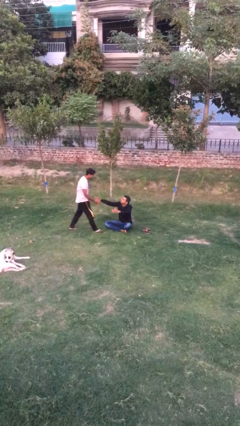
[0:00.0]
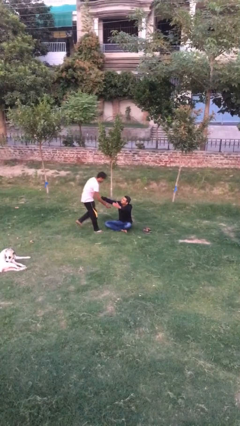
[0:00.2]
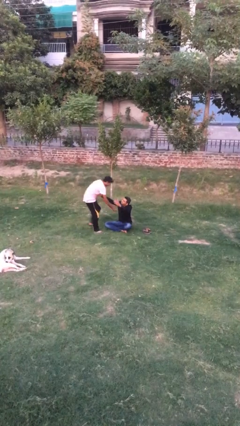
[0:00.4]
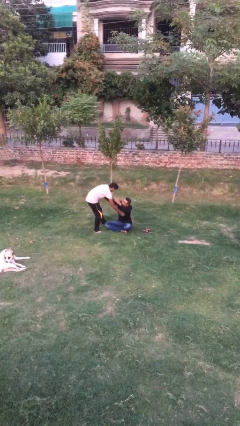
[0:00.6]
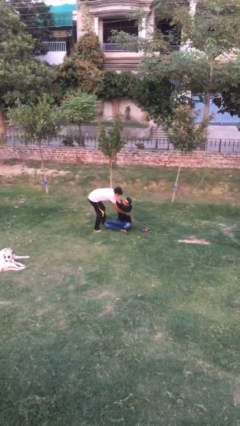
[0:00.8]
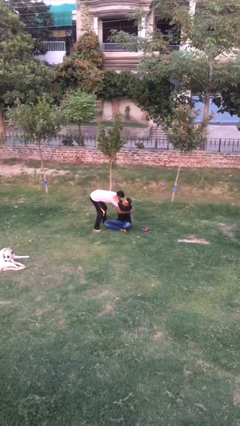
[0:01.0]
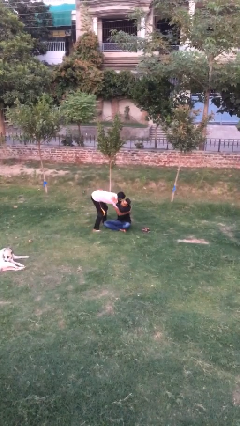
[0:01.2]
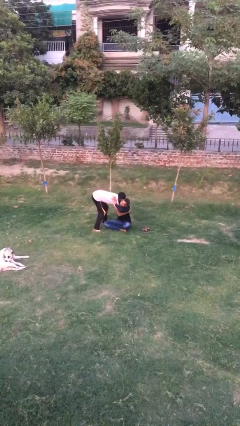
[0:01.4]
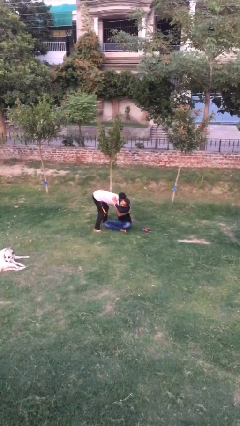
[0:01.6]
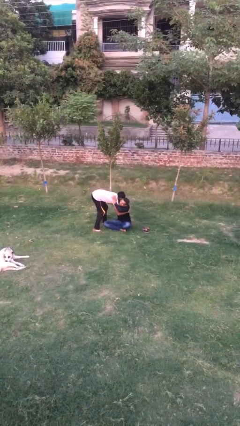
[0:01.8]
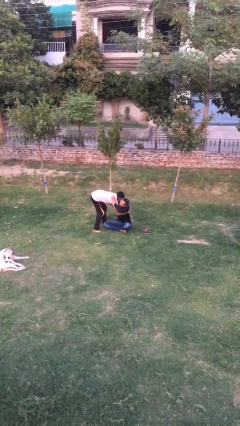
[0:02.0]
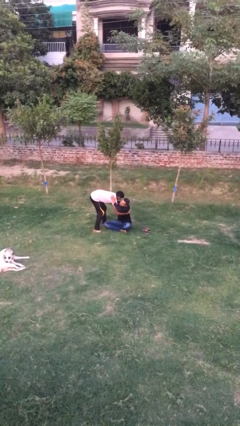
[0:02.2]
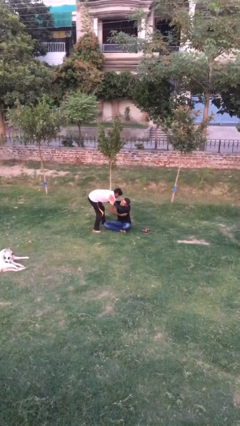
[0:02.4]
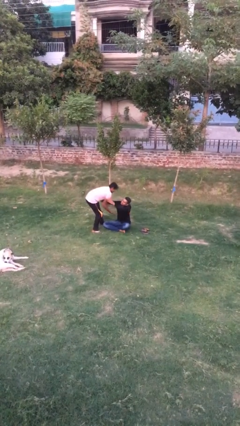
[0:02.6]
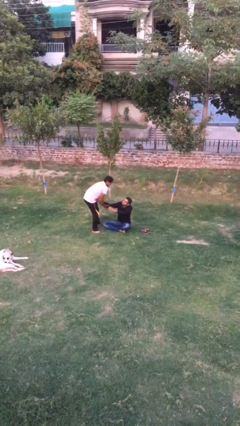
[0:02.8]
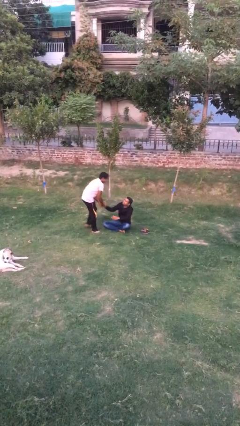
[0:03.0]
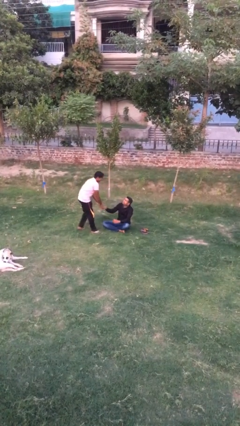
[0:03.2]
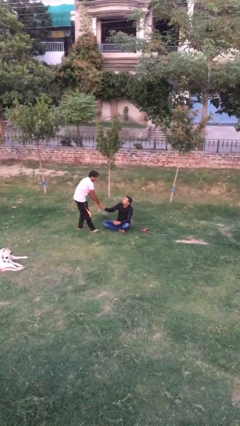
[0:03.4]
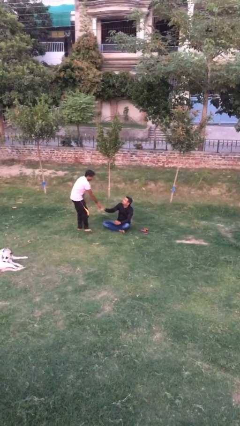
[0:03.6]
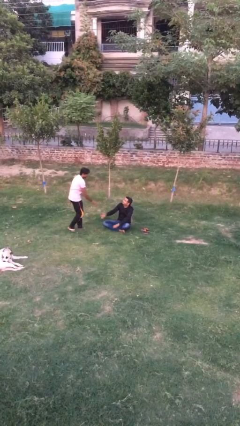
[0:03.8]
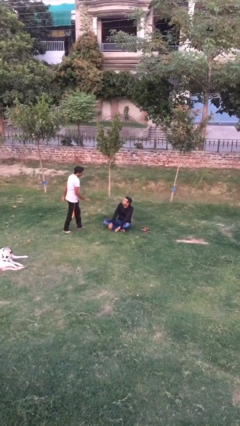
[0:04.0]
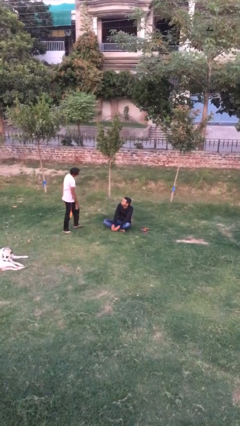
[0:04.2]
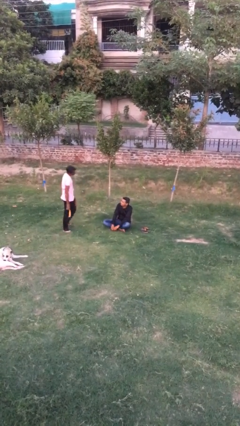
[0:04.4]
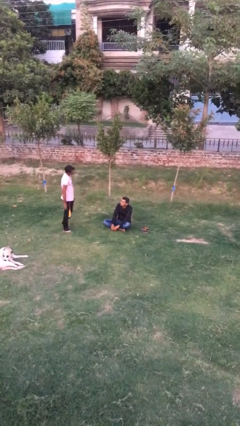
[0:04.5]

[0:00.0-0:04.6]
person embraces person

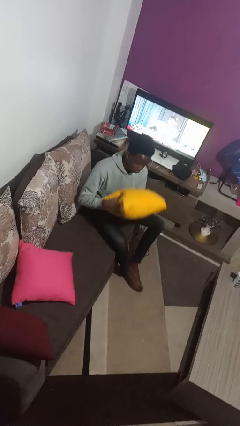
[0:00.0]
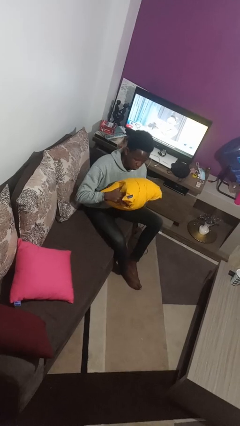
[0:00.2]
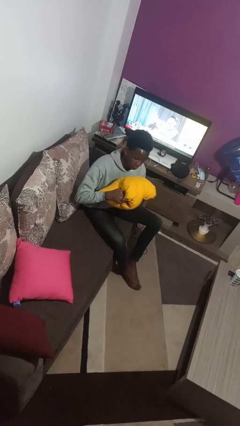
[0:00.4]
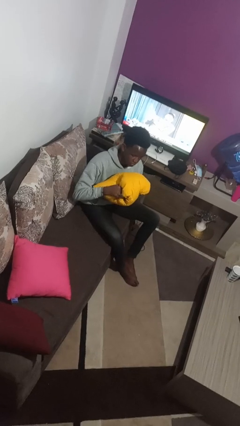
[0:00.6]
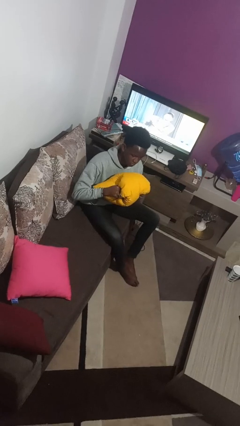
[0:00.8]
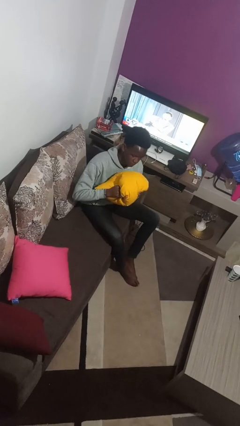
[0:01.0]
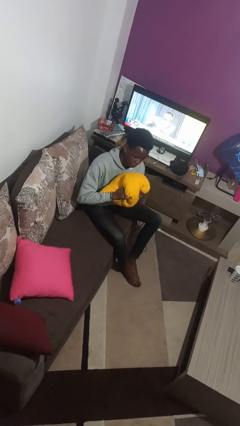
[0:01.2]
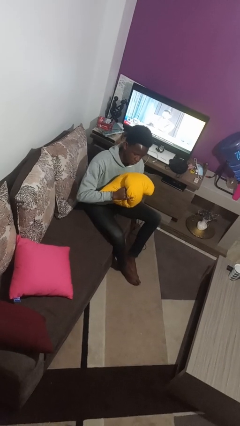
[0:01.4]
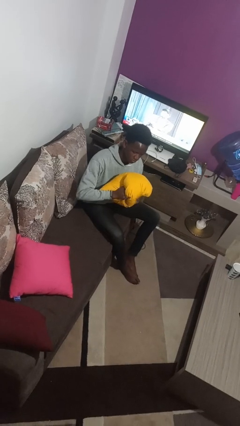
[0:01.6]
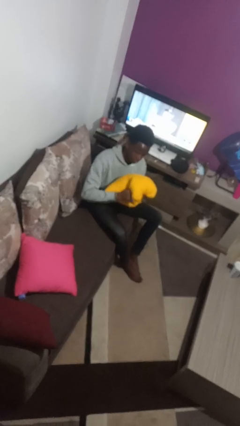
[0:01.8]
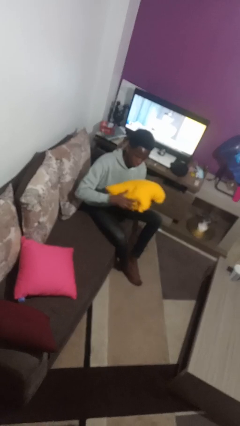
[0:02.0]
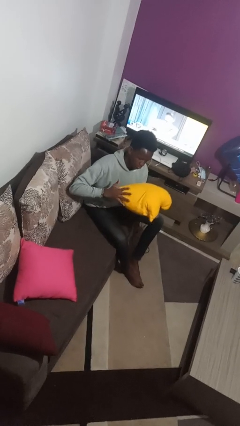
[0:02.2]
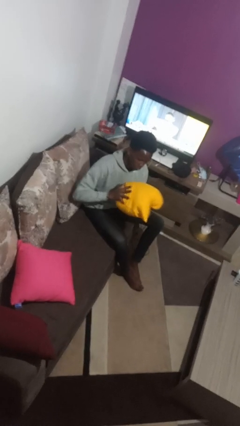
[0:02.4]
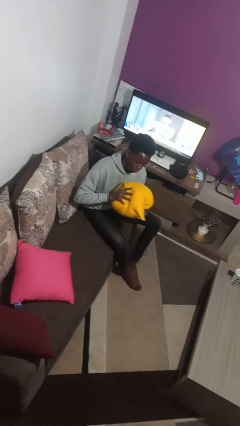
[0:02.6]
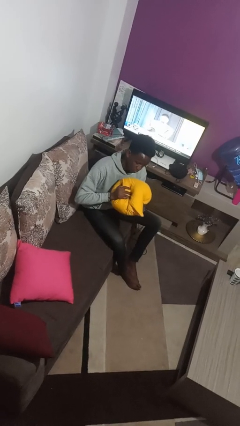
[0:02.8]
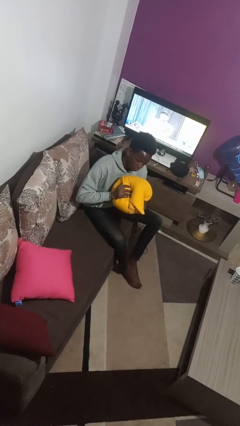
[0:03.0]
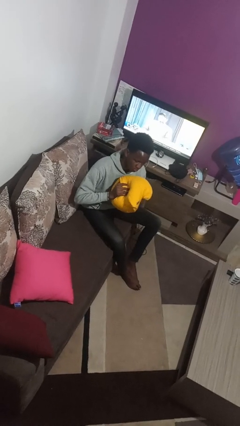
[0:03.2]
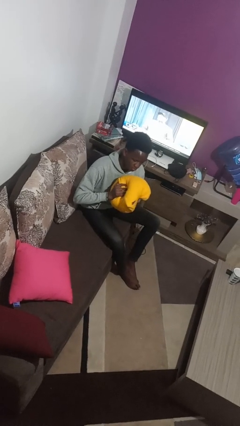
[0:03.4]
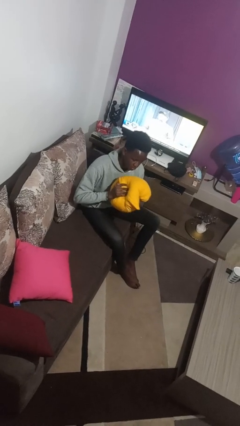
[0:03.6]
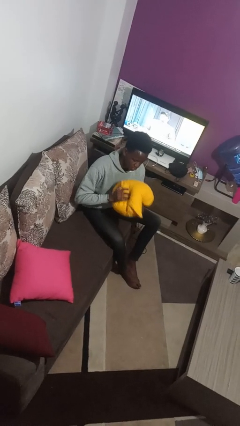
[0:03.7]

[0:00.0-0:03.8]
person squeezes object

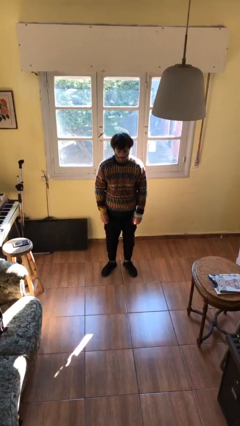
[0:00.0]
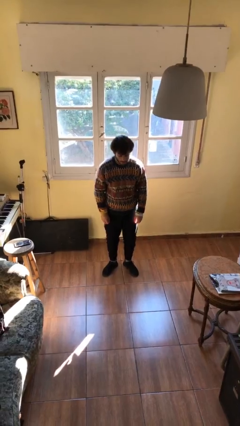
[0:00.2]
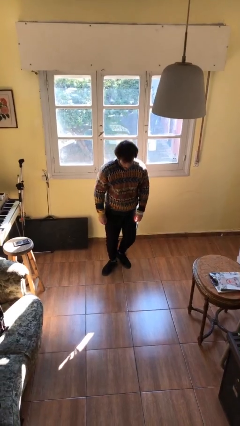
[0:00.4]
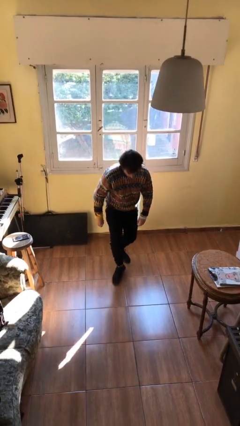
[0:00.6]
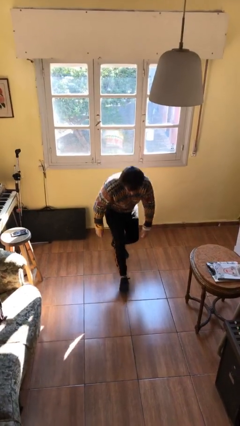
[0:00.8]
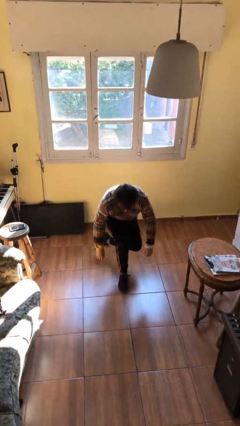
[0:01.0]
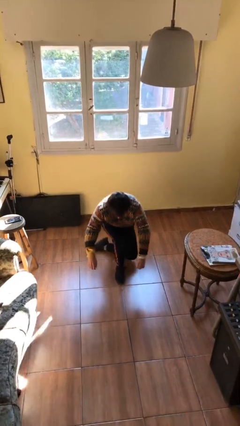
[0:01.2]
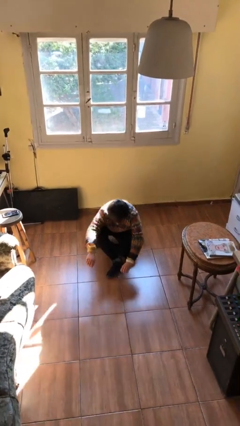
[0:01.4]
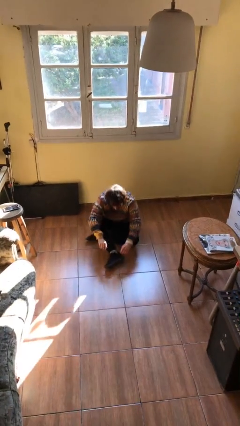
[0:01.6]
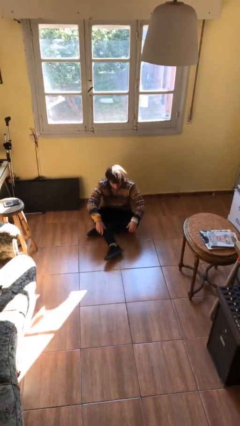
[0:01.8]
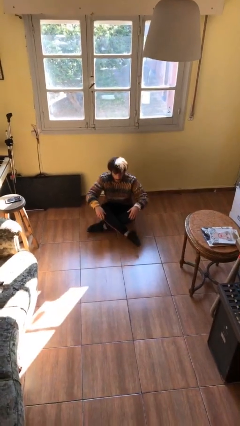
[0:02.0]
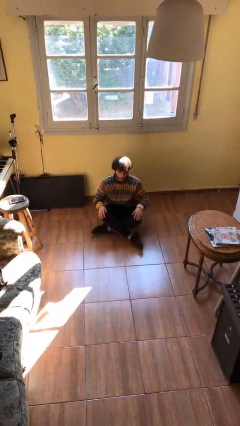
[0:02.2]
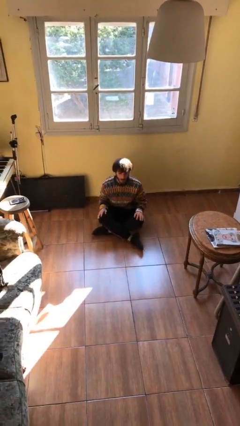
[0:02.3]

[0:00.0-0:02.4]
person sits crisscross

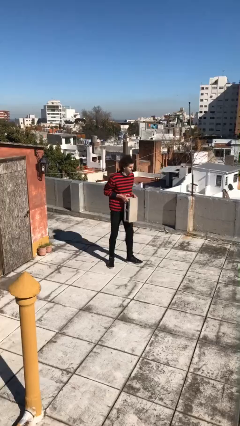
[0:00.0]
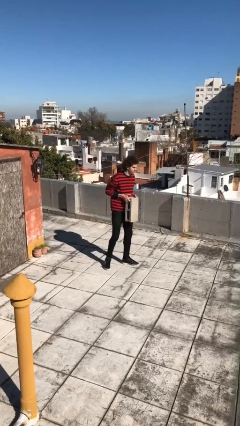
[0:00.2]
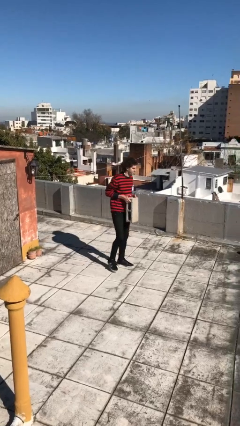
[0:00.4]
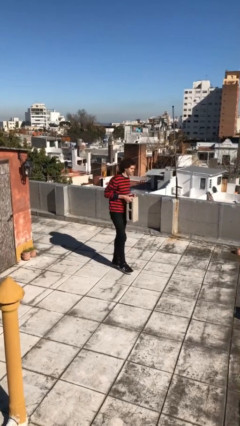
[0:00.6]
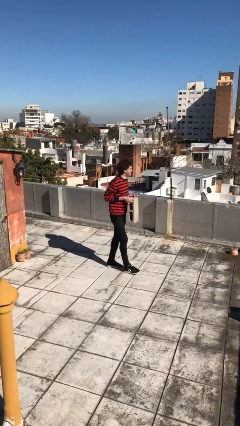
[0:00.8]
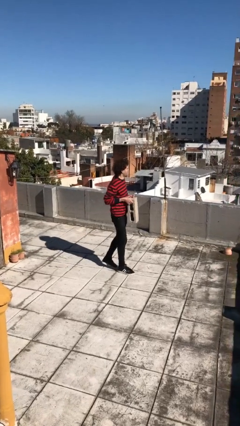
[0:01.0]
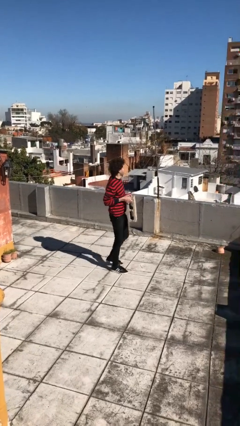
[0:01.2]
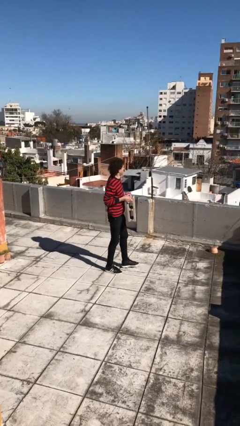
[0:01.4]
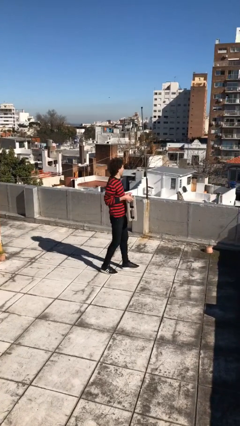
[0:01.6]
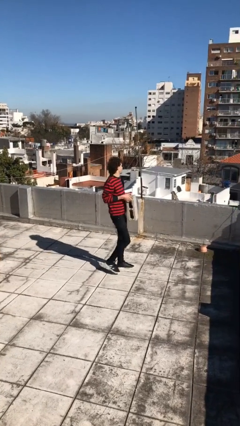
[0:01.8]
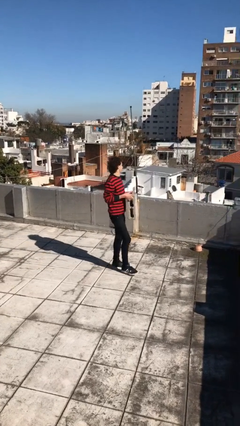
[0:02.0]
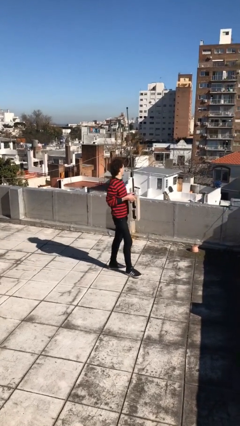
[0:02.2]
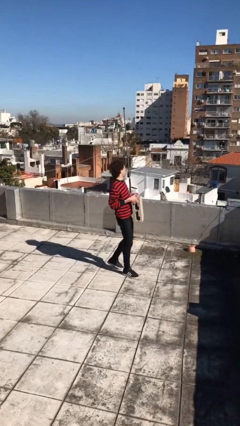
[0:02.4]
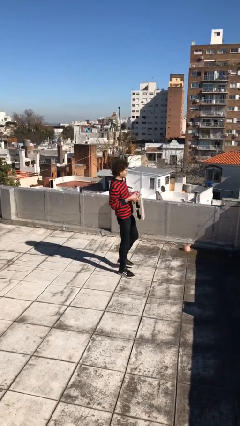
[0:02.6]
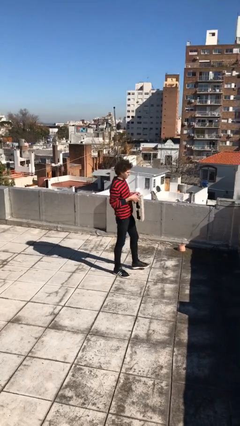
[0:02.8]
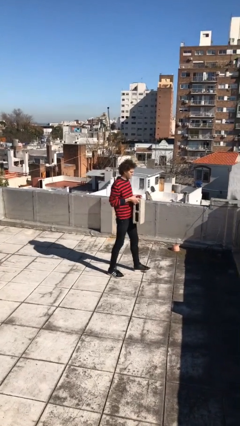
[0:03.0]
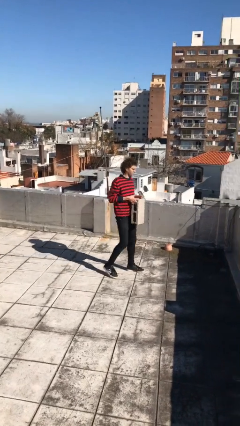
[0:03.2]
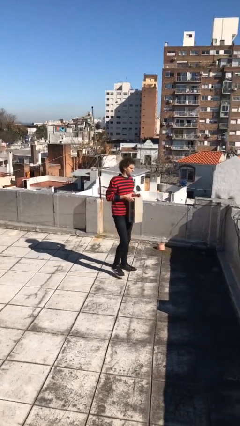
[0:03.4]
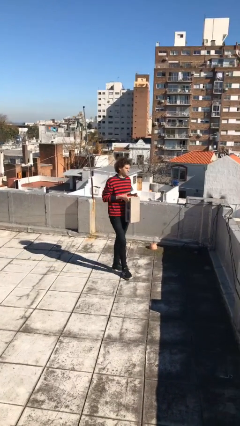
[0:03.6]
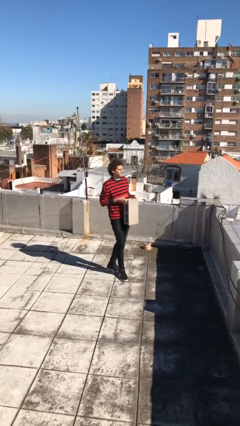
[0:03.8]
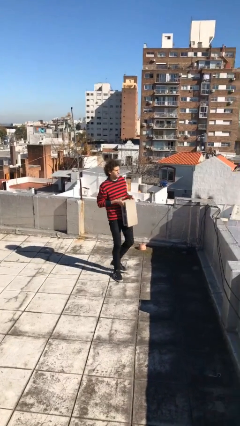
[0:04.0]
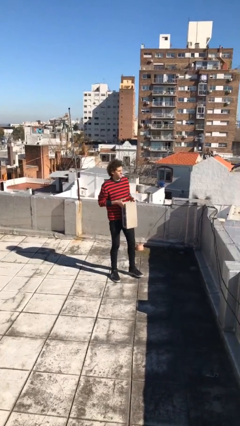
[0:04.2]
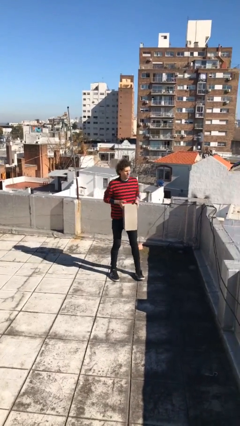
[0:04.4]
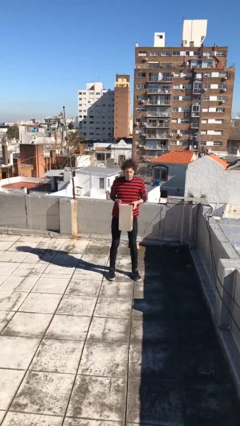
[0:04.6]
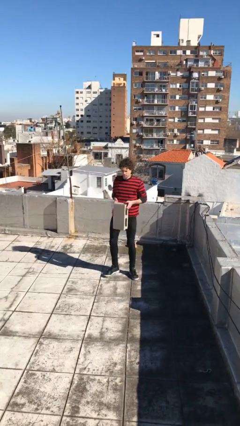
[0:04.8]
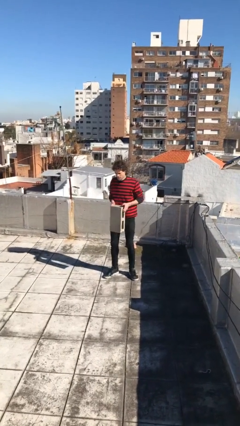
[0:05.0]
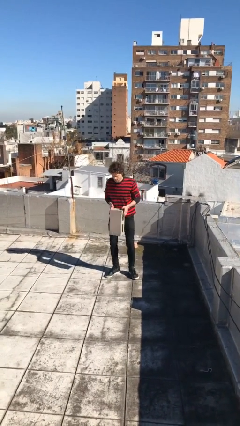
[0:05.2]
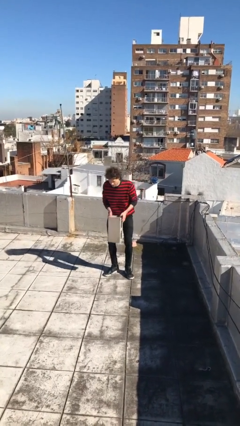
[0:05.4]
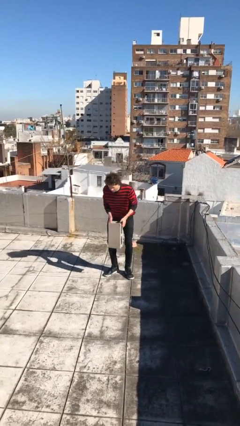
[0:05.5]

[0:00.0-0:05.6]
person carries heavy object

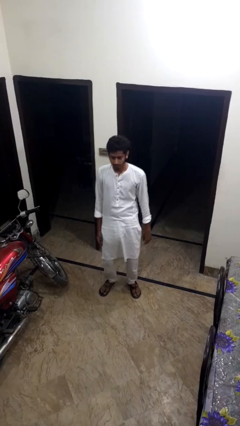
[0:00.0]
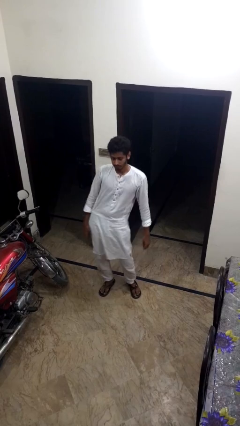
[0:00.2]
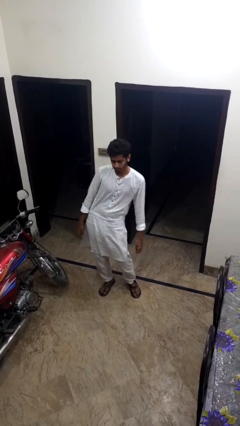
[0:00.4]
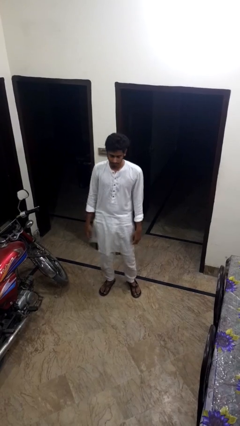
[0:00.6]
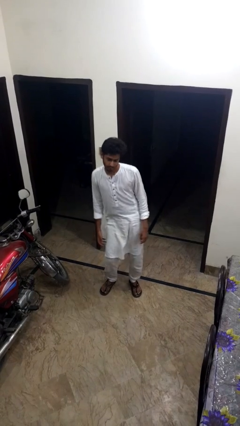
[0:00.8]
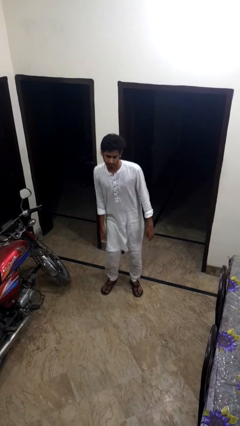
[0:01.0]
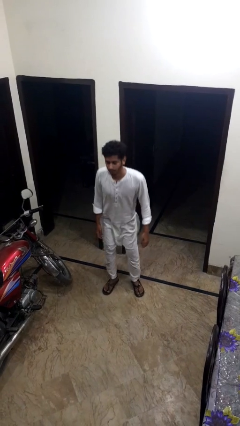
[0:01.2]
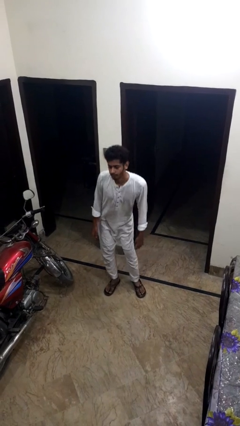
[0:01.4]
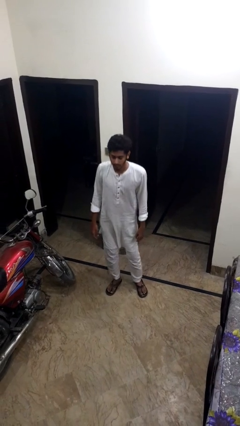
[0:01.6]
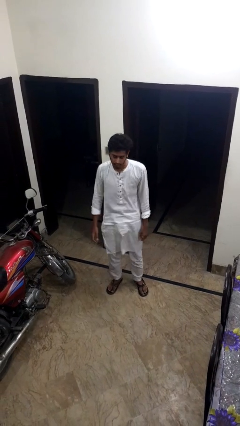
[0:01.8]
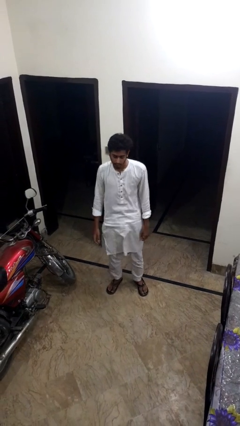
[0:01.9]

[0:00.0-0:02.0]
person wiggles hips
